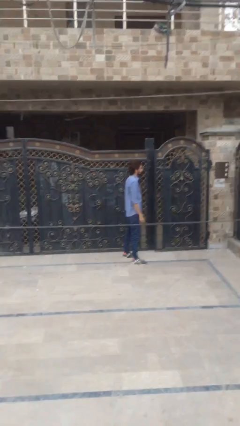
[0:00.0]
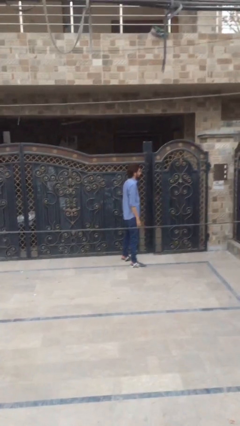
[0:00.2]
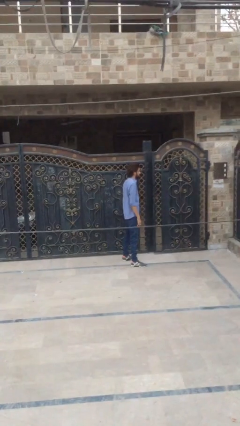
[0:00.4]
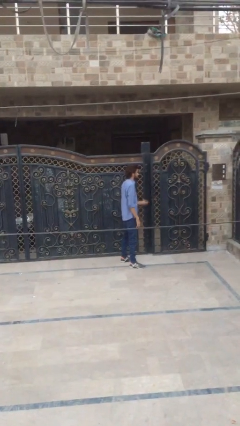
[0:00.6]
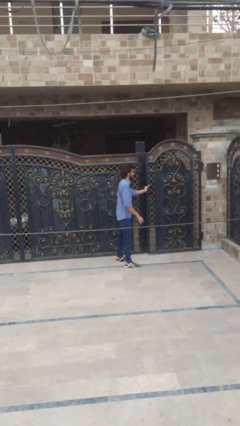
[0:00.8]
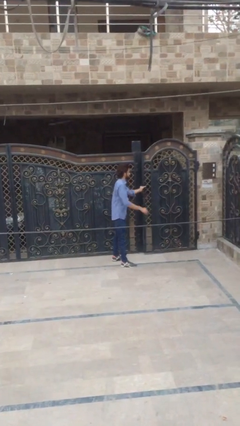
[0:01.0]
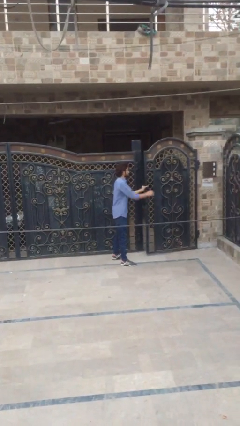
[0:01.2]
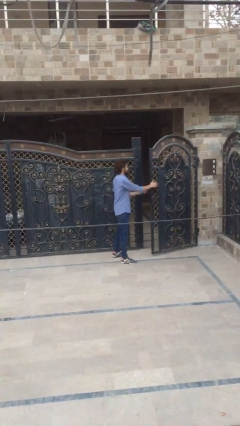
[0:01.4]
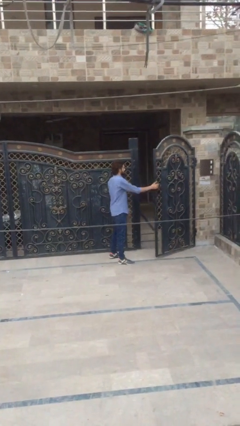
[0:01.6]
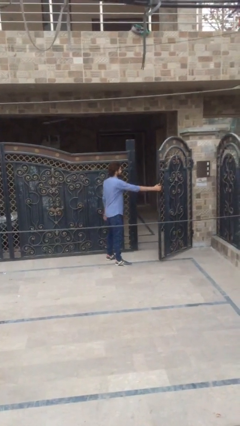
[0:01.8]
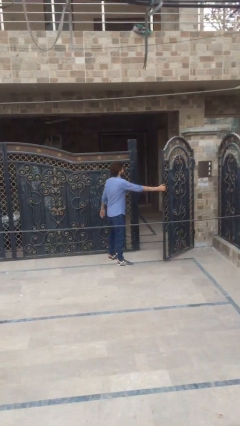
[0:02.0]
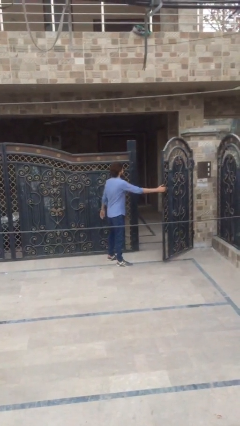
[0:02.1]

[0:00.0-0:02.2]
person opens facility door

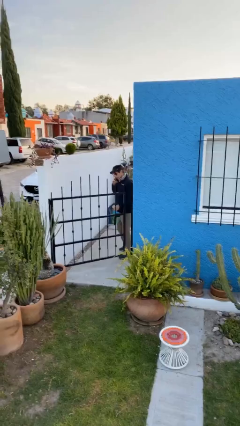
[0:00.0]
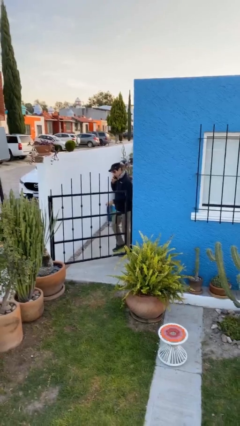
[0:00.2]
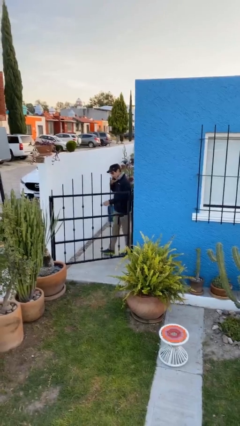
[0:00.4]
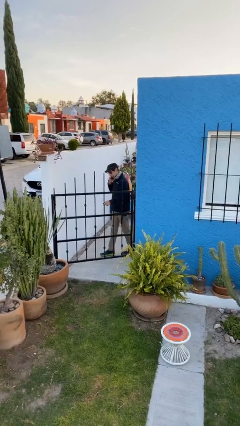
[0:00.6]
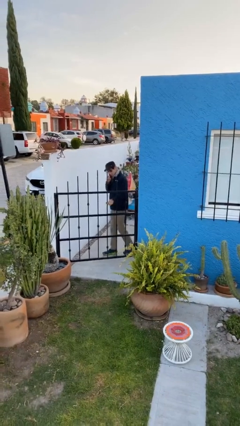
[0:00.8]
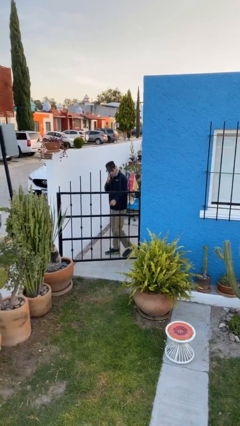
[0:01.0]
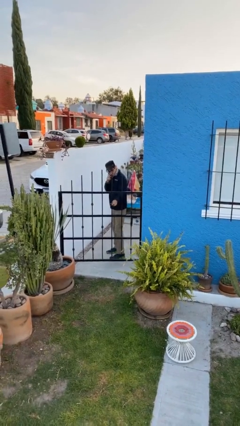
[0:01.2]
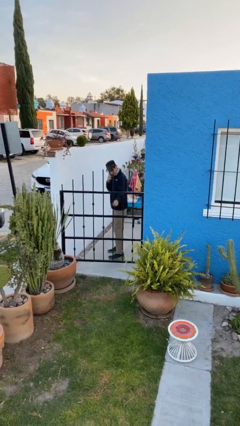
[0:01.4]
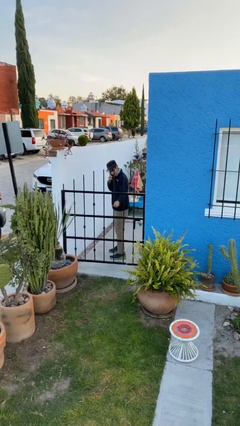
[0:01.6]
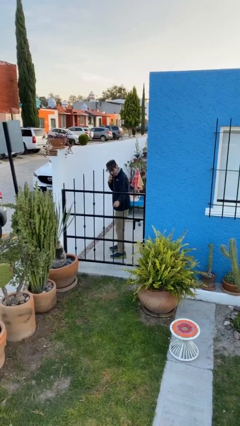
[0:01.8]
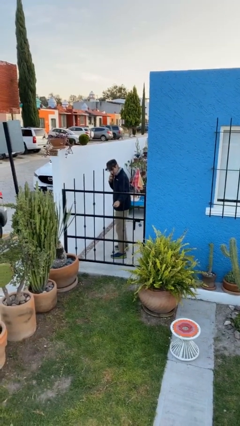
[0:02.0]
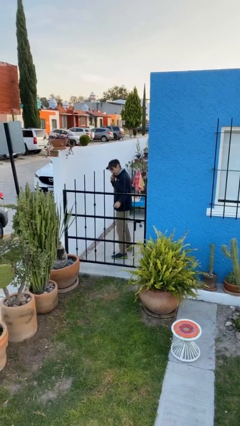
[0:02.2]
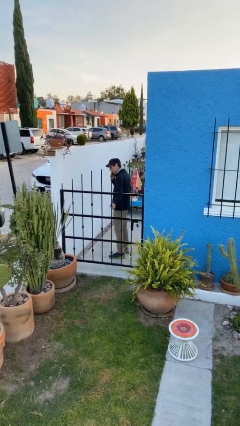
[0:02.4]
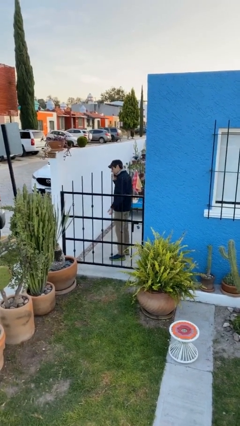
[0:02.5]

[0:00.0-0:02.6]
person closes facility door

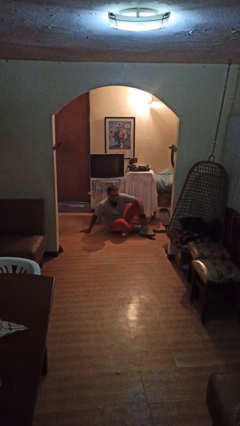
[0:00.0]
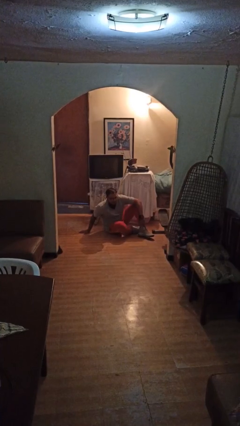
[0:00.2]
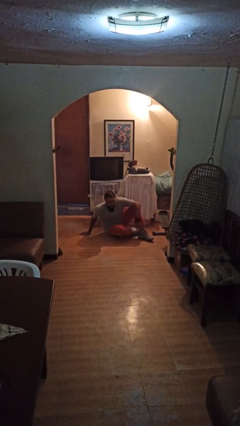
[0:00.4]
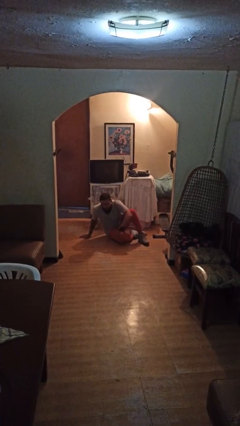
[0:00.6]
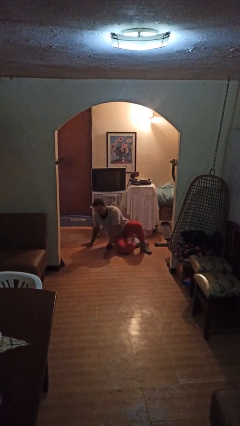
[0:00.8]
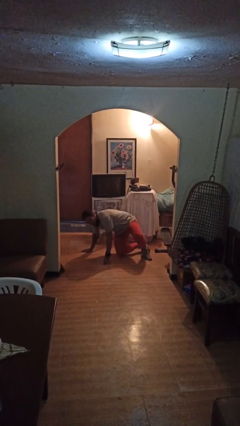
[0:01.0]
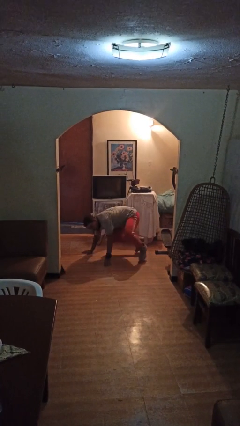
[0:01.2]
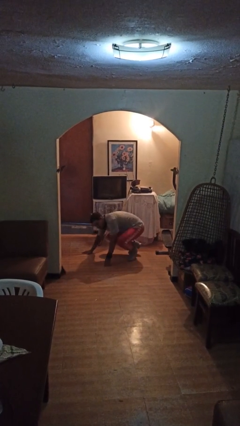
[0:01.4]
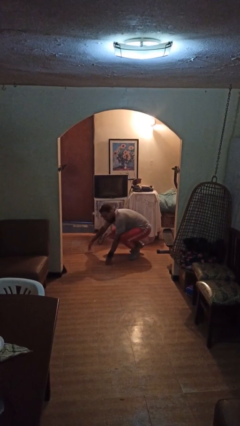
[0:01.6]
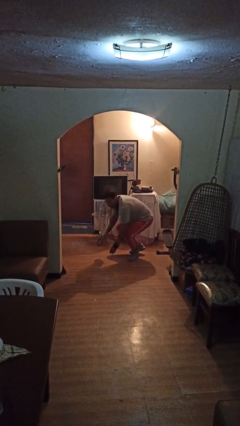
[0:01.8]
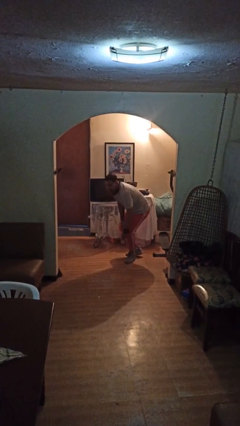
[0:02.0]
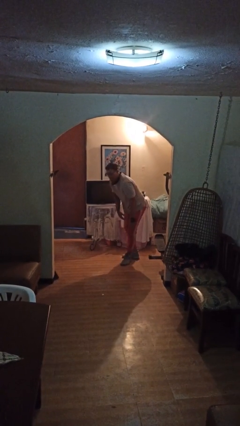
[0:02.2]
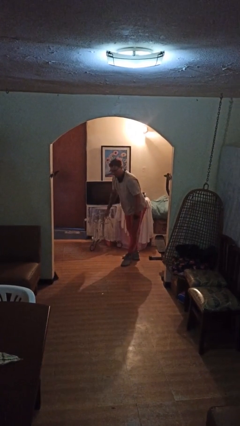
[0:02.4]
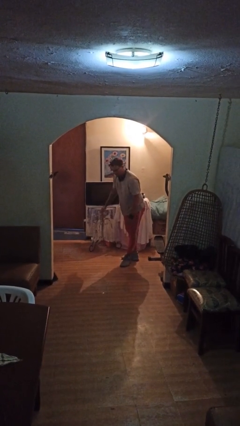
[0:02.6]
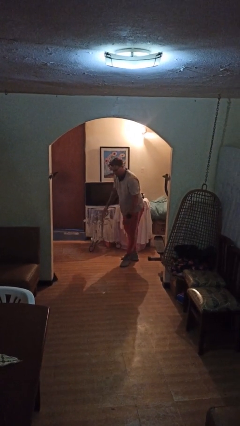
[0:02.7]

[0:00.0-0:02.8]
person stands up

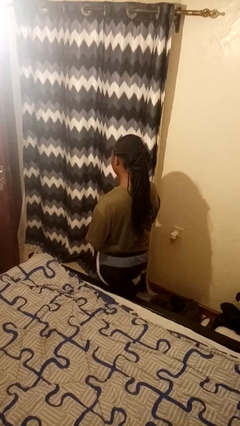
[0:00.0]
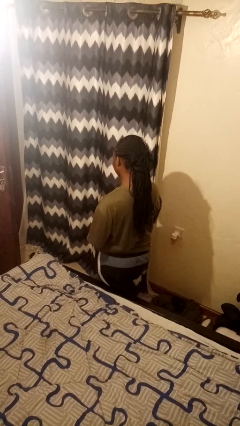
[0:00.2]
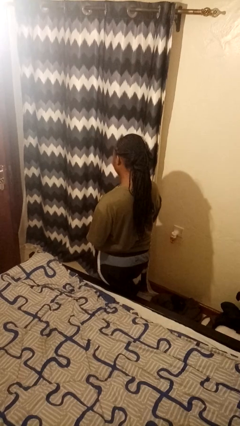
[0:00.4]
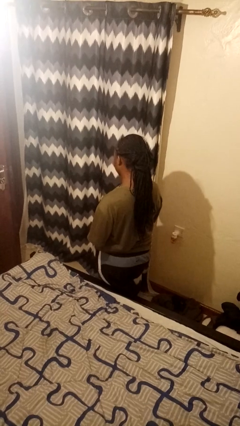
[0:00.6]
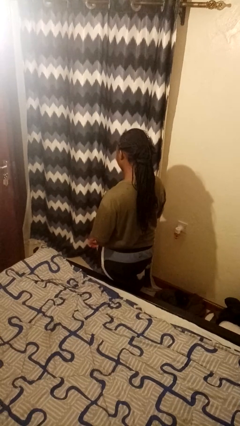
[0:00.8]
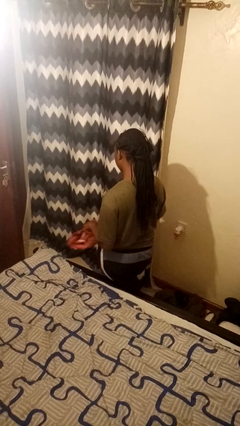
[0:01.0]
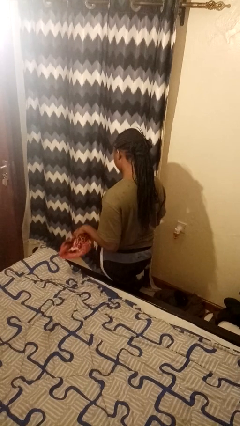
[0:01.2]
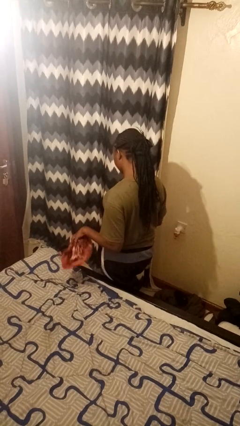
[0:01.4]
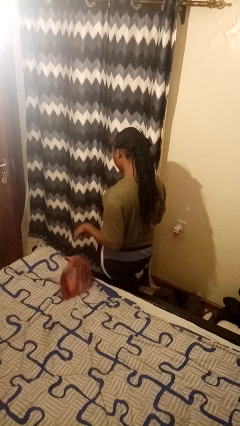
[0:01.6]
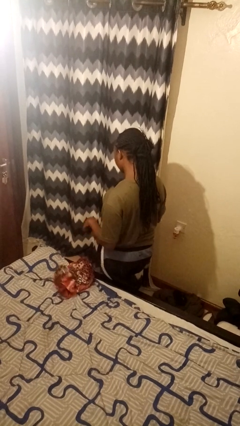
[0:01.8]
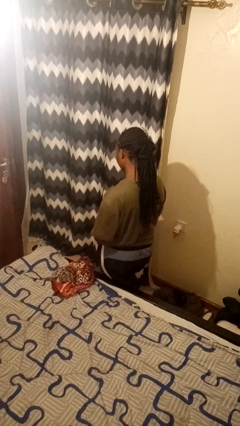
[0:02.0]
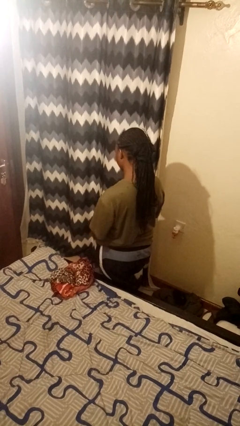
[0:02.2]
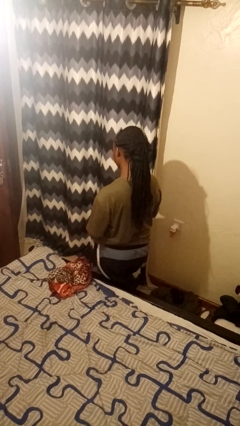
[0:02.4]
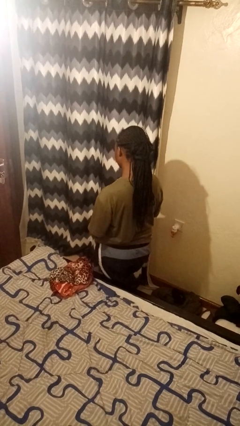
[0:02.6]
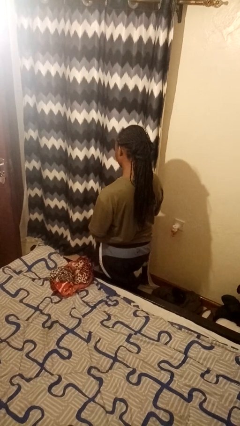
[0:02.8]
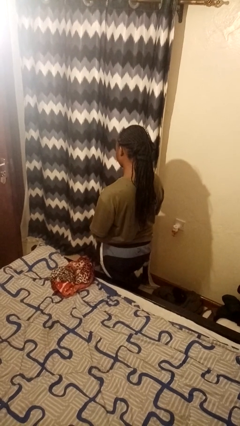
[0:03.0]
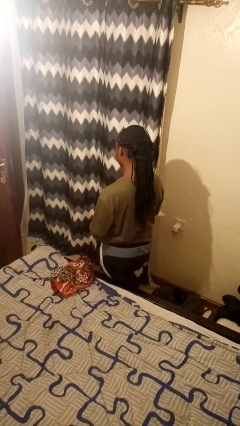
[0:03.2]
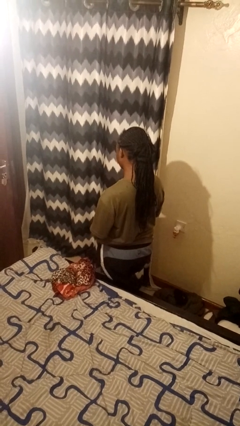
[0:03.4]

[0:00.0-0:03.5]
person throws object on bed

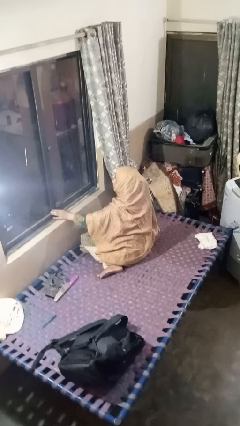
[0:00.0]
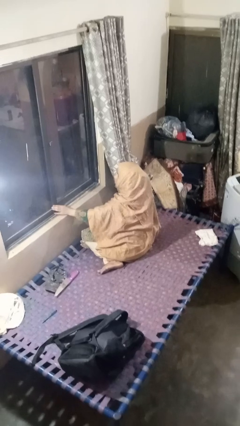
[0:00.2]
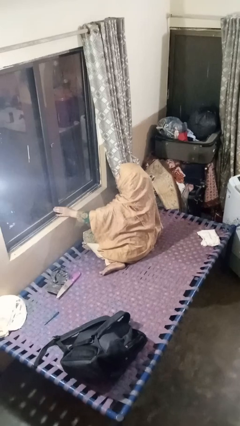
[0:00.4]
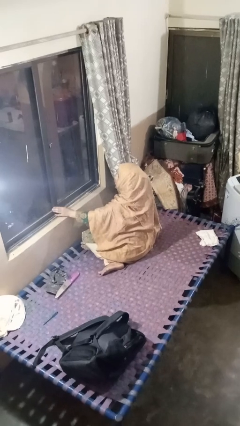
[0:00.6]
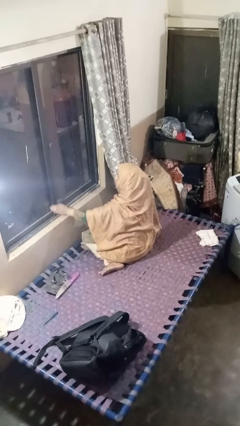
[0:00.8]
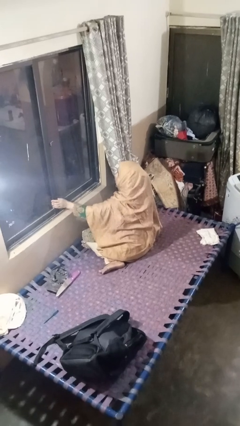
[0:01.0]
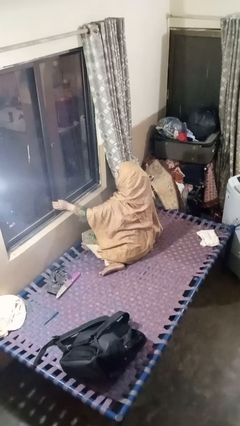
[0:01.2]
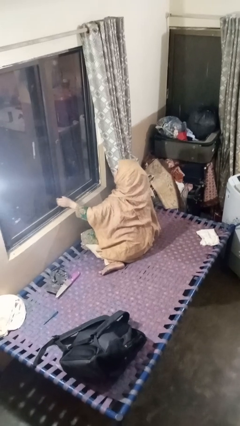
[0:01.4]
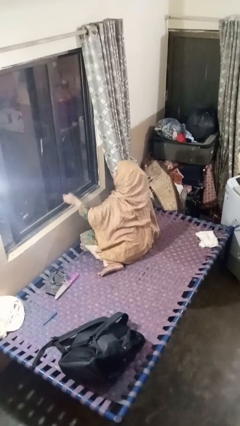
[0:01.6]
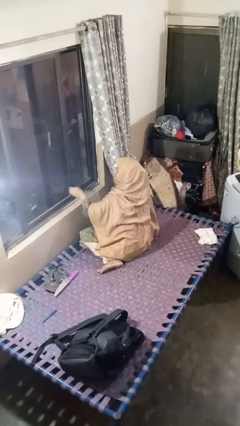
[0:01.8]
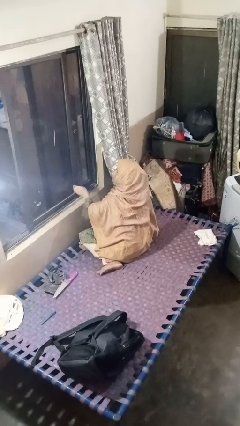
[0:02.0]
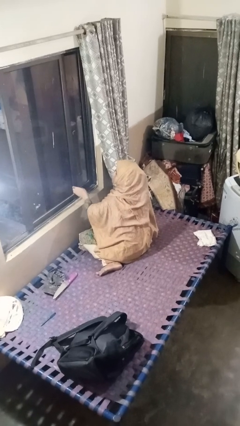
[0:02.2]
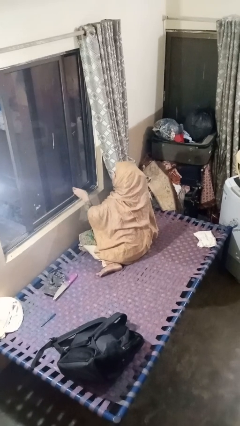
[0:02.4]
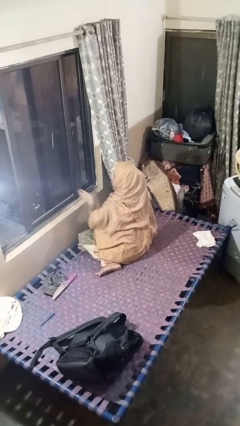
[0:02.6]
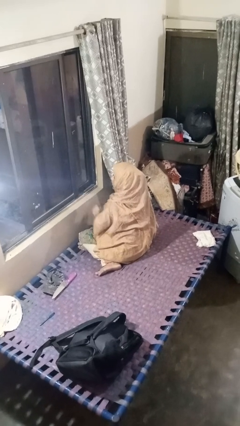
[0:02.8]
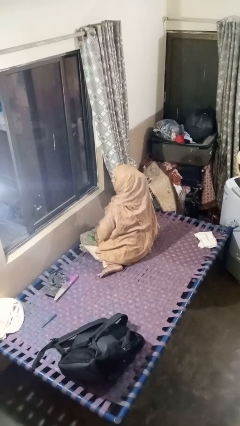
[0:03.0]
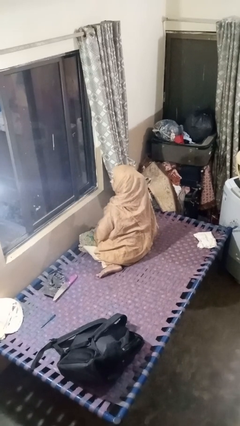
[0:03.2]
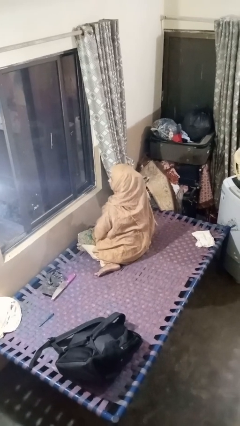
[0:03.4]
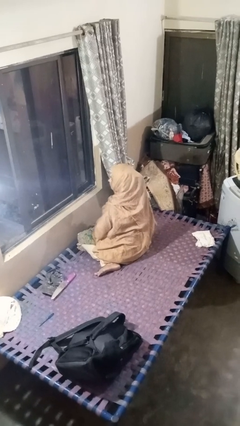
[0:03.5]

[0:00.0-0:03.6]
person opens home window

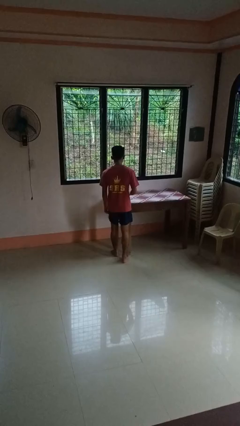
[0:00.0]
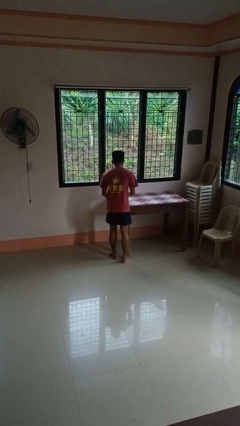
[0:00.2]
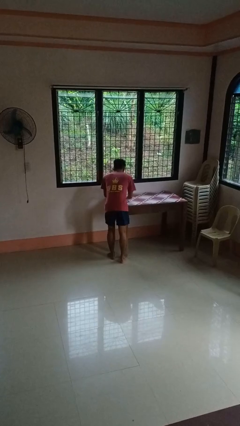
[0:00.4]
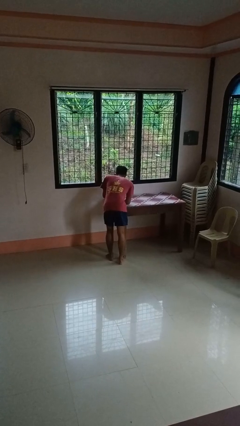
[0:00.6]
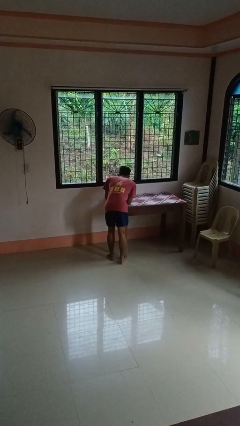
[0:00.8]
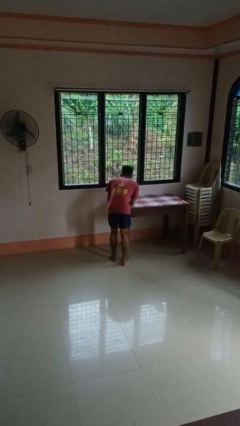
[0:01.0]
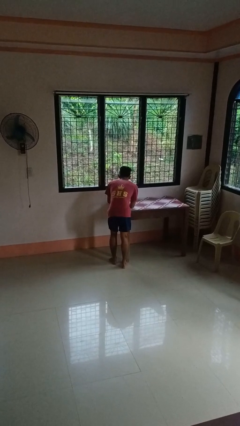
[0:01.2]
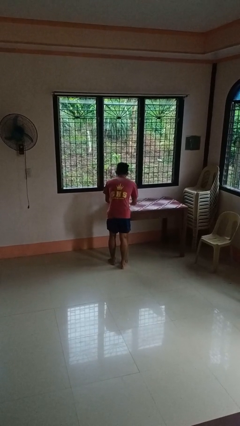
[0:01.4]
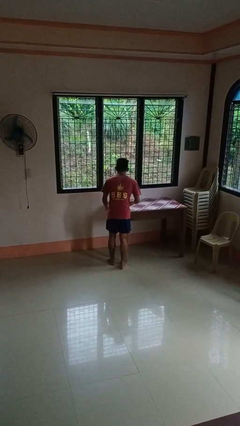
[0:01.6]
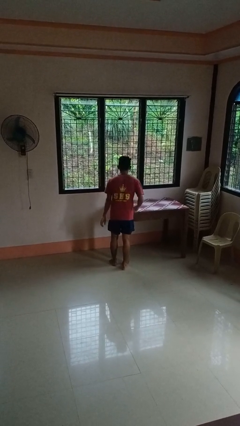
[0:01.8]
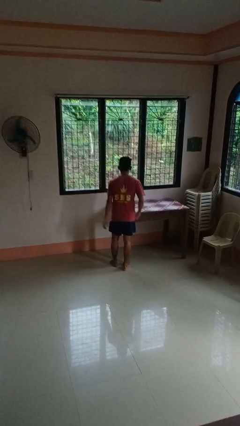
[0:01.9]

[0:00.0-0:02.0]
person bumps into table

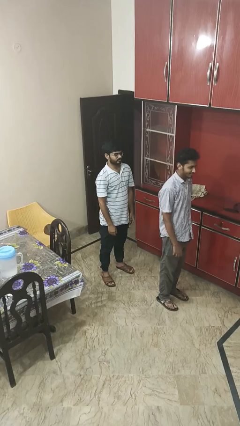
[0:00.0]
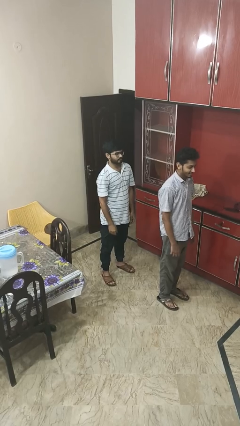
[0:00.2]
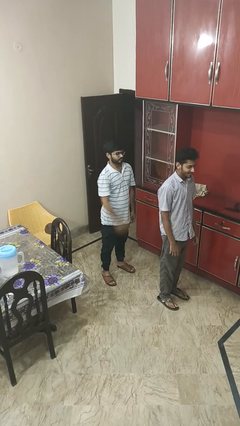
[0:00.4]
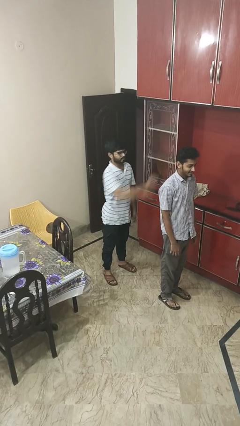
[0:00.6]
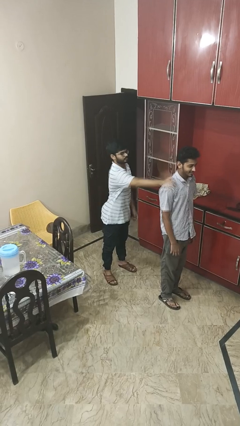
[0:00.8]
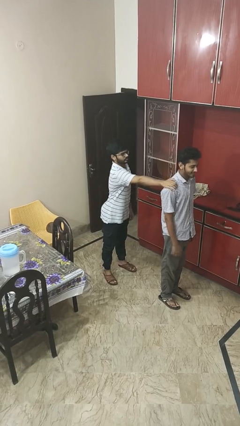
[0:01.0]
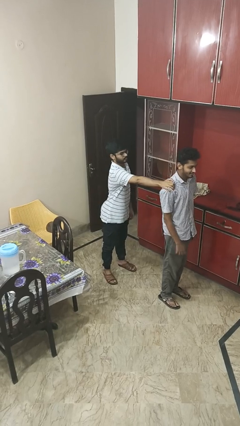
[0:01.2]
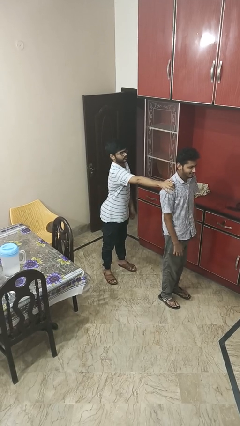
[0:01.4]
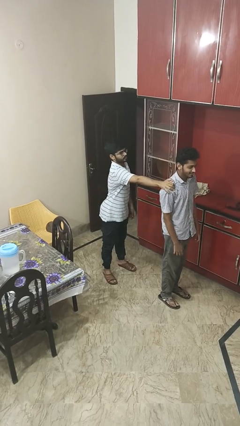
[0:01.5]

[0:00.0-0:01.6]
person grabs person by shoulder
